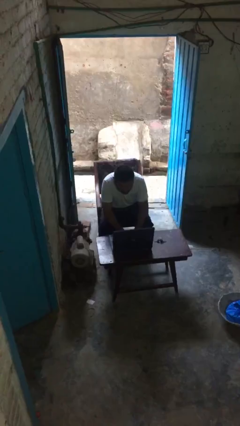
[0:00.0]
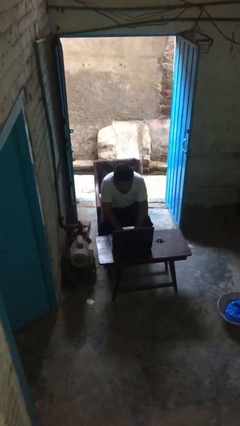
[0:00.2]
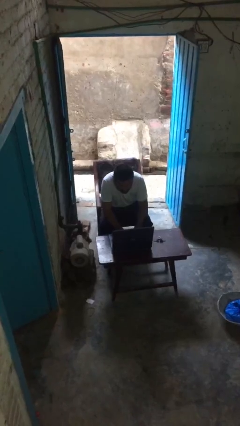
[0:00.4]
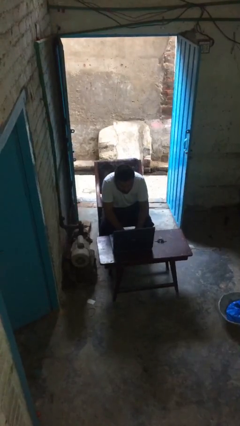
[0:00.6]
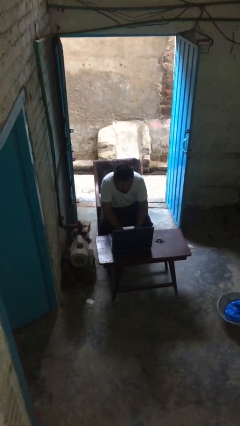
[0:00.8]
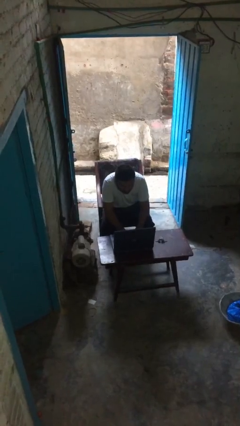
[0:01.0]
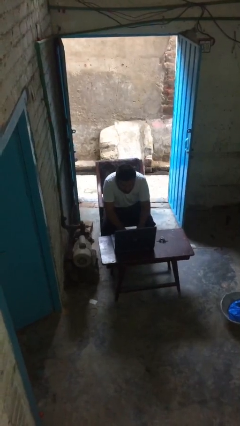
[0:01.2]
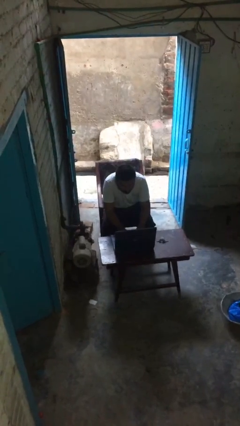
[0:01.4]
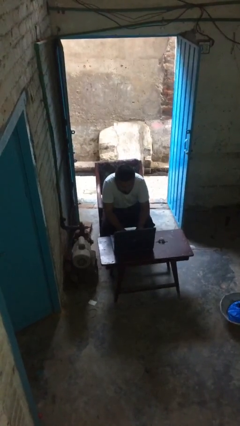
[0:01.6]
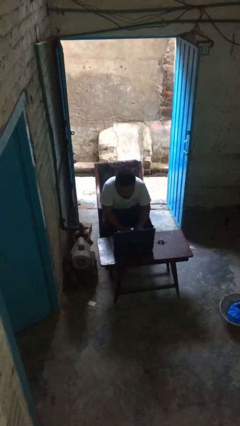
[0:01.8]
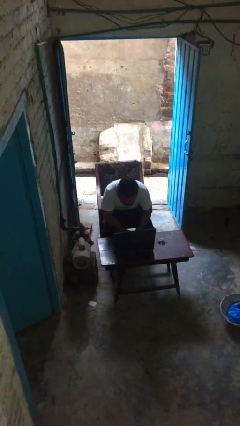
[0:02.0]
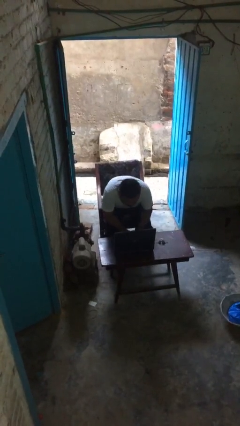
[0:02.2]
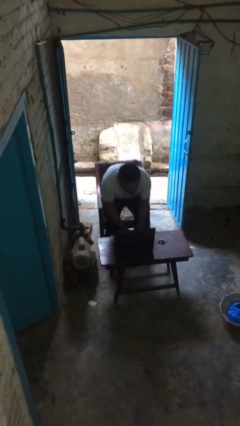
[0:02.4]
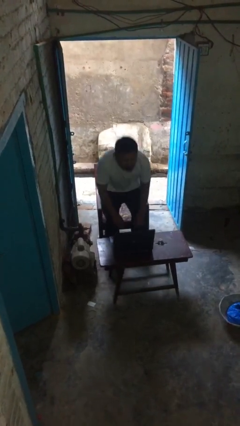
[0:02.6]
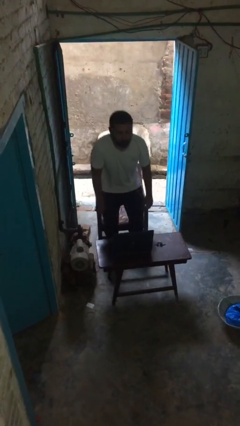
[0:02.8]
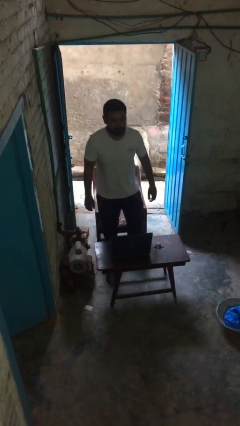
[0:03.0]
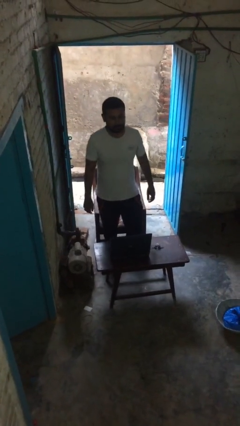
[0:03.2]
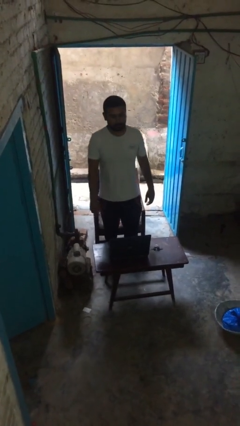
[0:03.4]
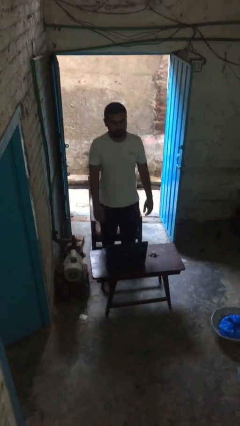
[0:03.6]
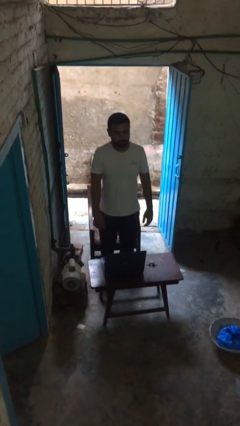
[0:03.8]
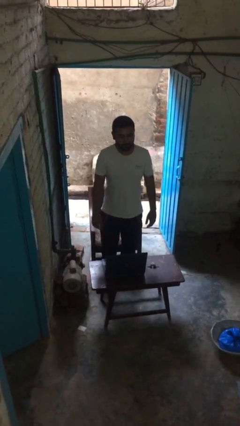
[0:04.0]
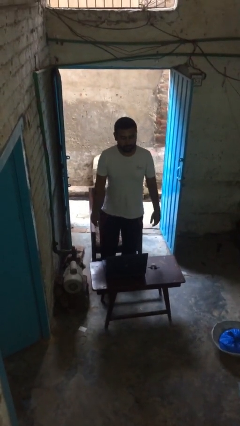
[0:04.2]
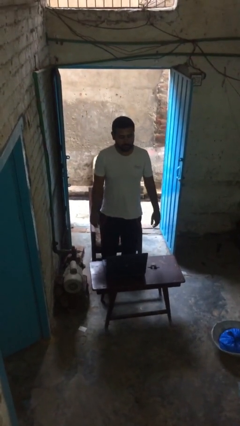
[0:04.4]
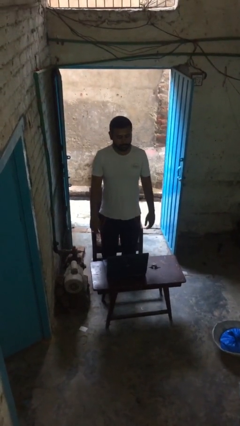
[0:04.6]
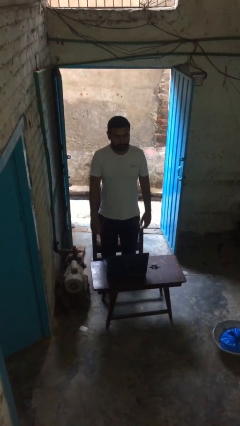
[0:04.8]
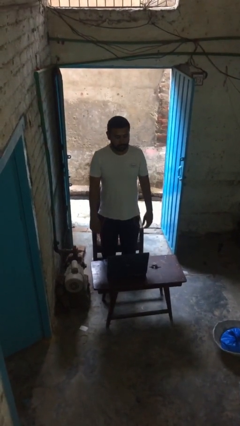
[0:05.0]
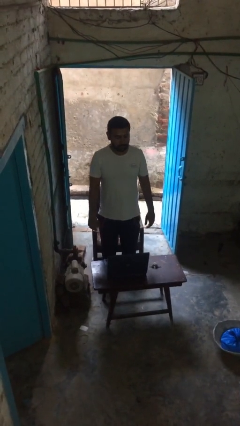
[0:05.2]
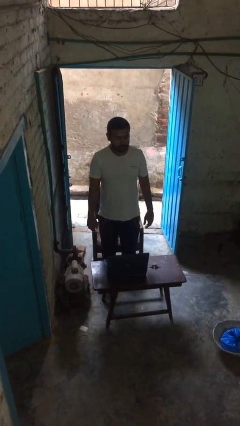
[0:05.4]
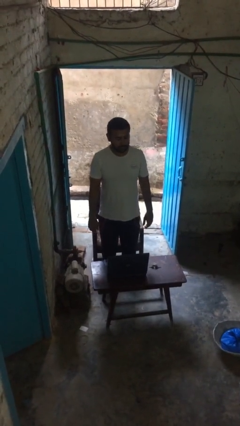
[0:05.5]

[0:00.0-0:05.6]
person stands up

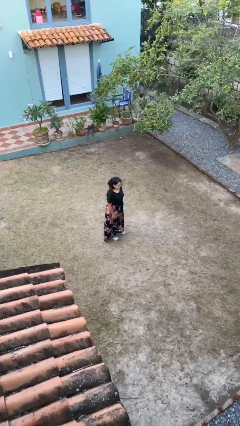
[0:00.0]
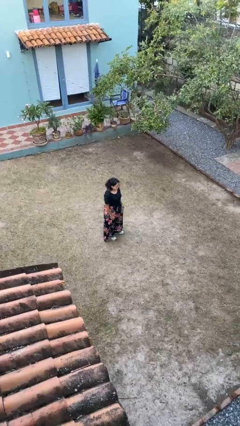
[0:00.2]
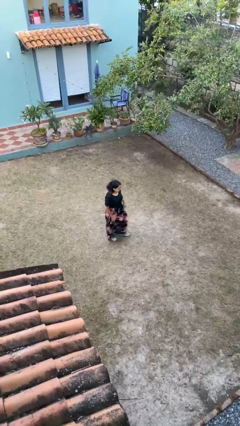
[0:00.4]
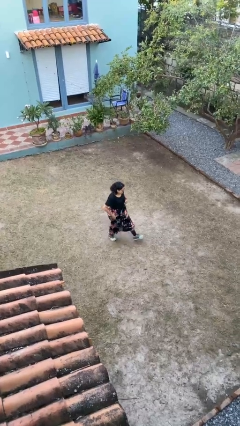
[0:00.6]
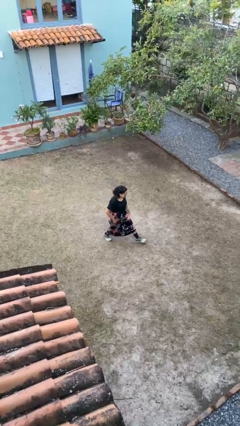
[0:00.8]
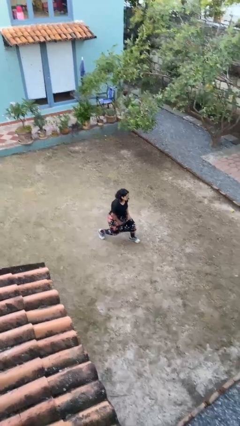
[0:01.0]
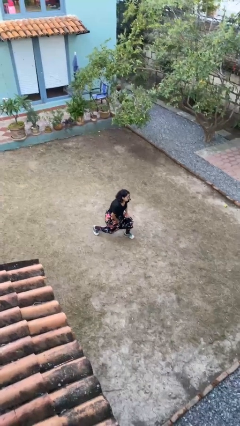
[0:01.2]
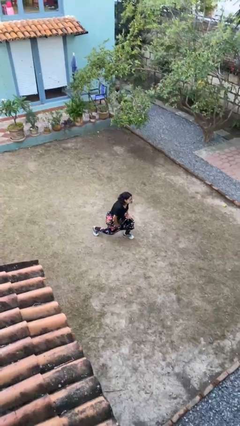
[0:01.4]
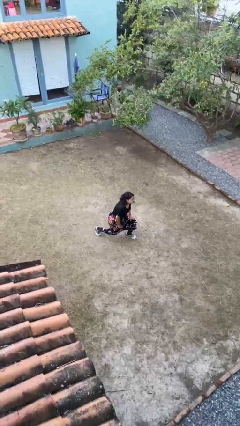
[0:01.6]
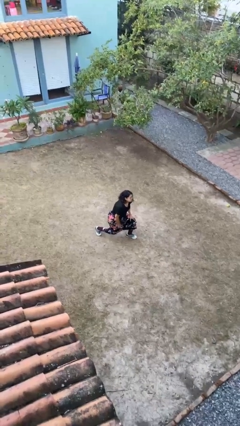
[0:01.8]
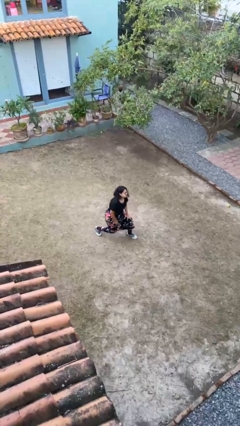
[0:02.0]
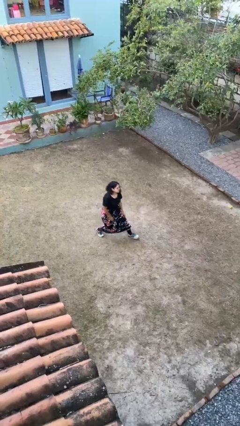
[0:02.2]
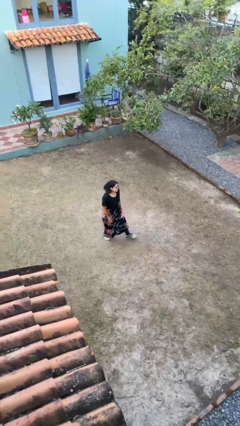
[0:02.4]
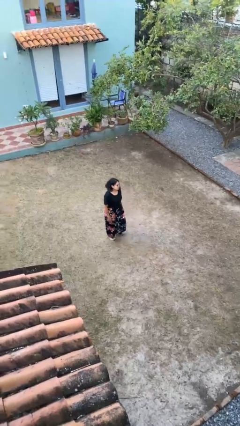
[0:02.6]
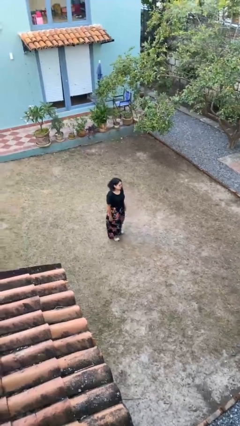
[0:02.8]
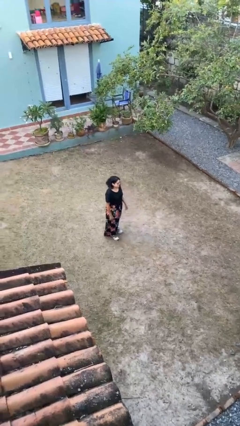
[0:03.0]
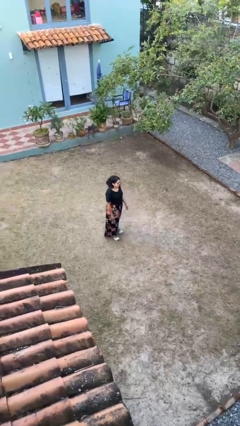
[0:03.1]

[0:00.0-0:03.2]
person exercises with lunges

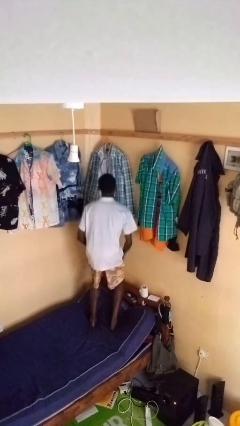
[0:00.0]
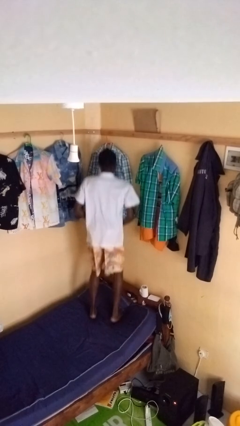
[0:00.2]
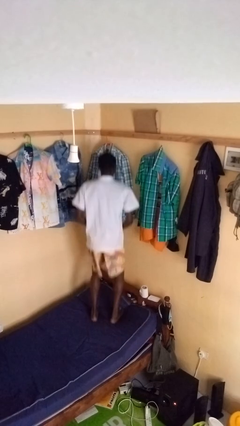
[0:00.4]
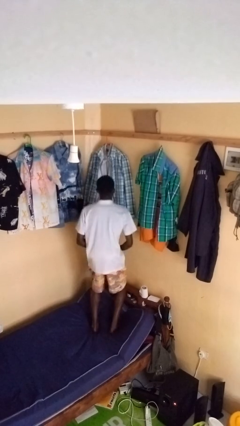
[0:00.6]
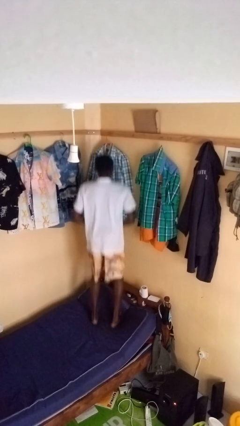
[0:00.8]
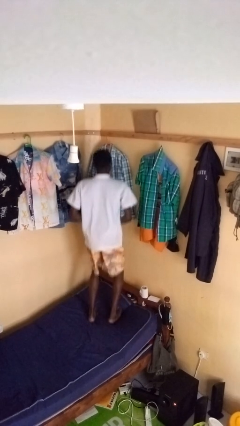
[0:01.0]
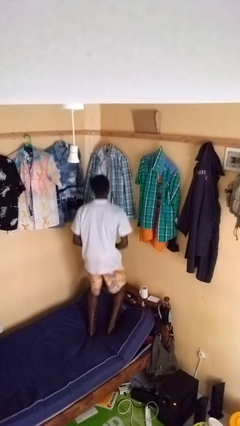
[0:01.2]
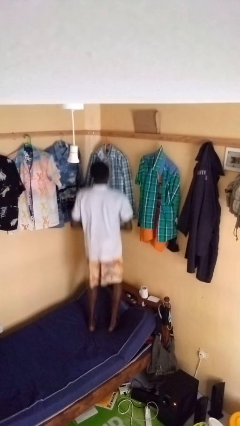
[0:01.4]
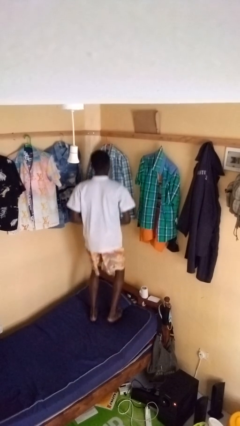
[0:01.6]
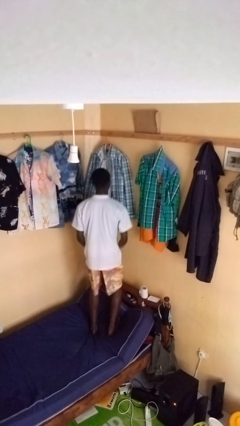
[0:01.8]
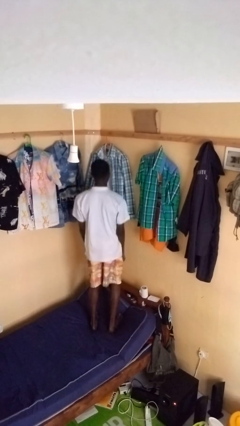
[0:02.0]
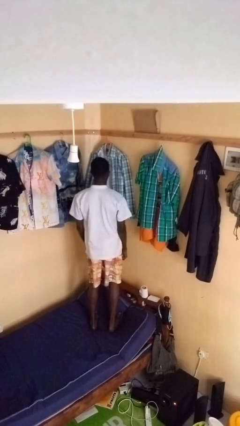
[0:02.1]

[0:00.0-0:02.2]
person jumps on bed

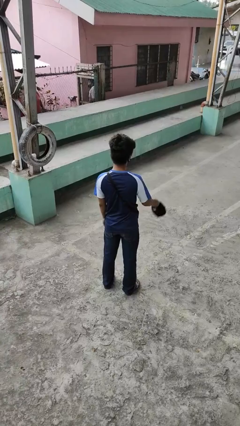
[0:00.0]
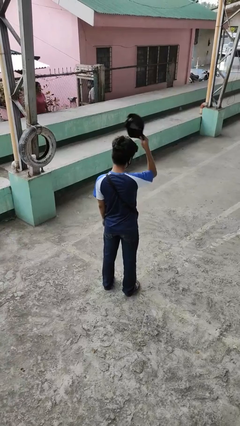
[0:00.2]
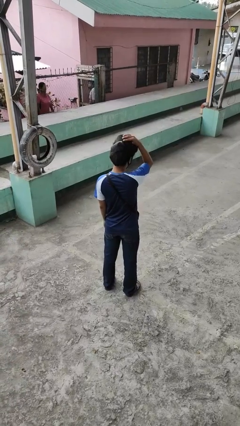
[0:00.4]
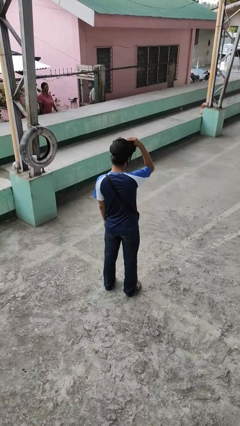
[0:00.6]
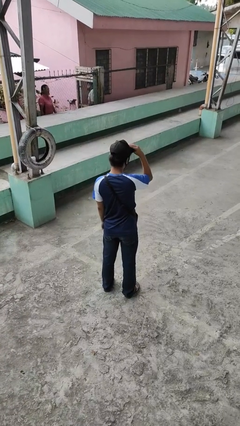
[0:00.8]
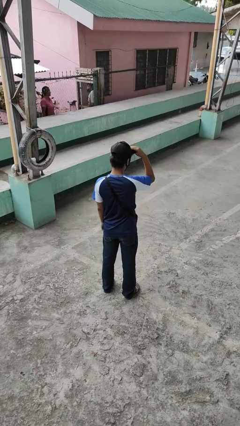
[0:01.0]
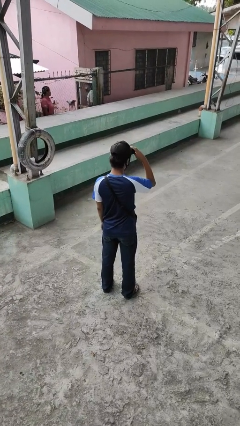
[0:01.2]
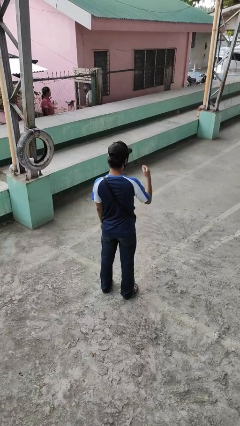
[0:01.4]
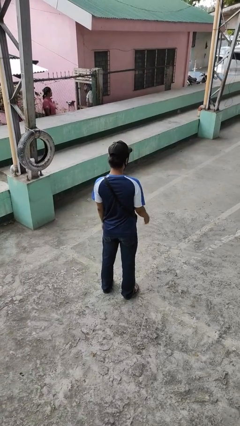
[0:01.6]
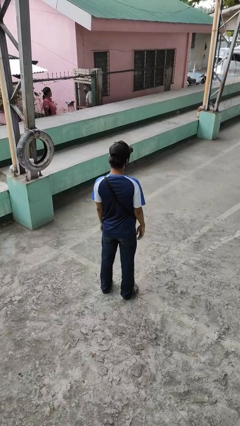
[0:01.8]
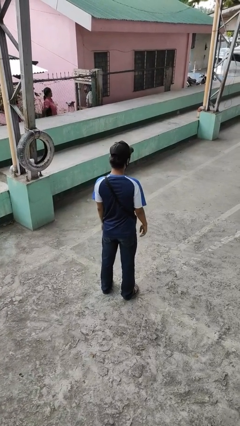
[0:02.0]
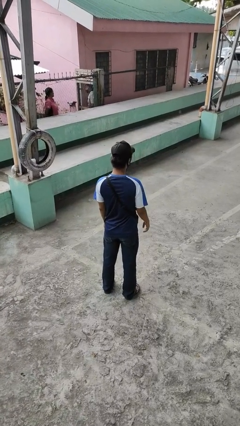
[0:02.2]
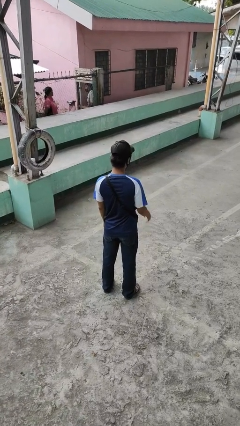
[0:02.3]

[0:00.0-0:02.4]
person puts on hat

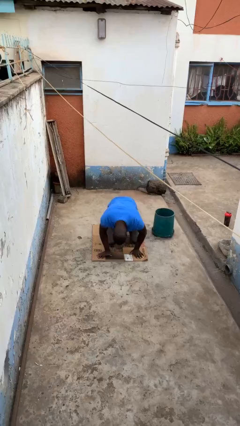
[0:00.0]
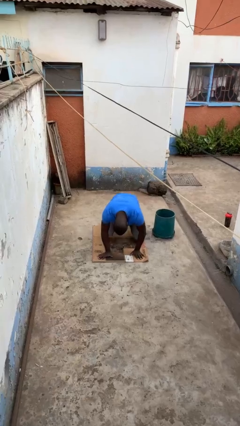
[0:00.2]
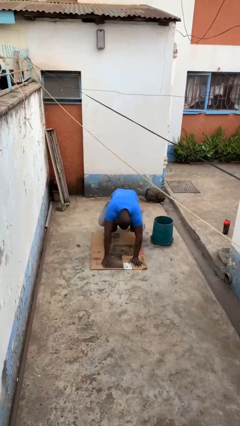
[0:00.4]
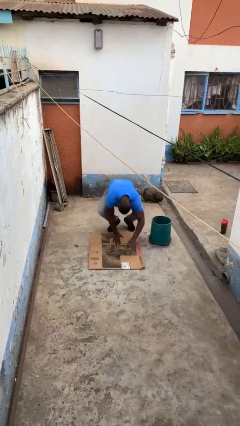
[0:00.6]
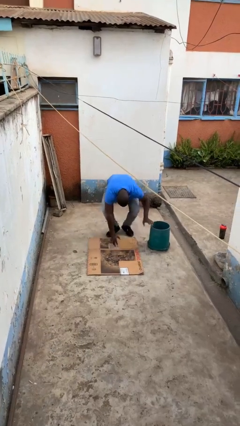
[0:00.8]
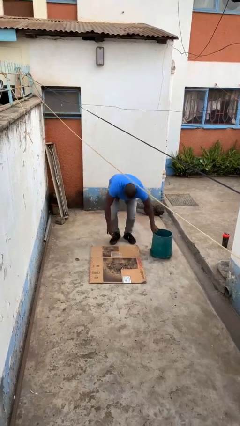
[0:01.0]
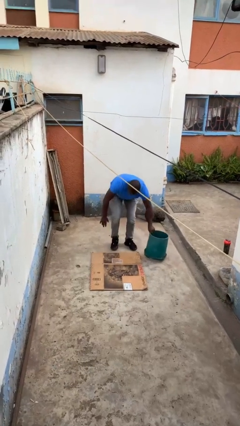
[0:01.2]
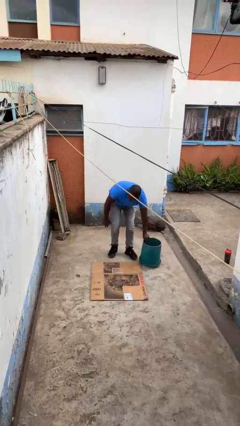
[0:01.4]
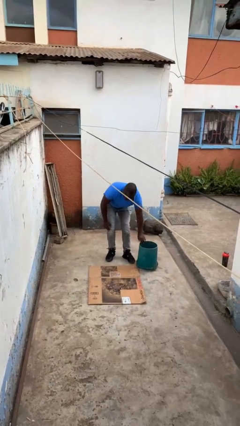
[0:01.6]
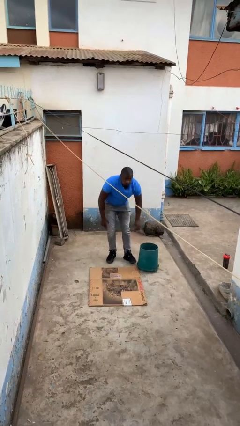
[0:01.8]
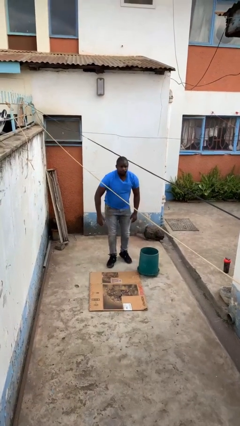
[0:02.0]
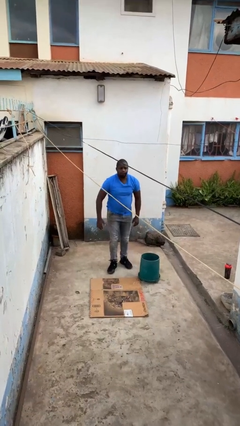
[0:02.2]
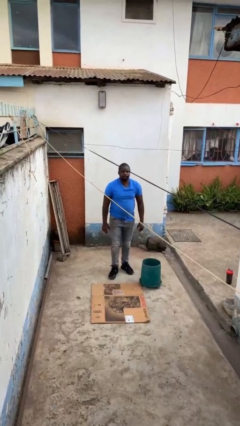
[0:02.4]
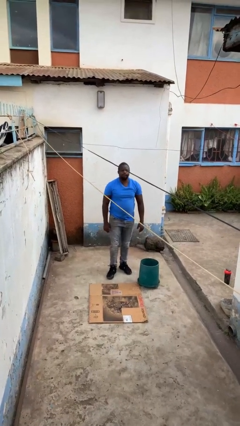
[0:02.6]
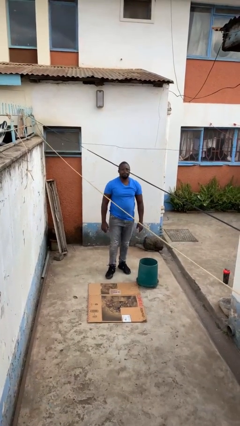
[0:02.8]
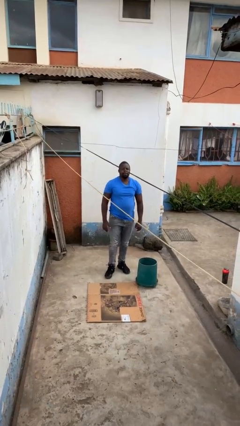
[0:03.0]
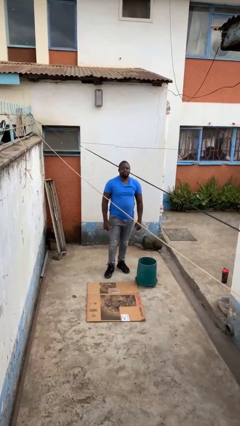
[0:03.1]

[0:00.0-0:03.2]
person stands up from floor

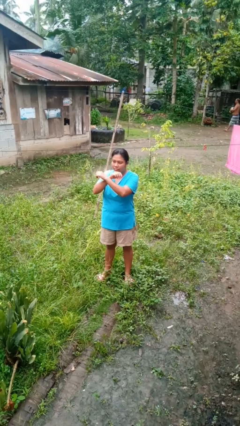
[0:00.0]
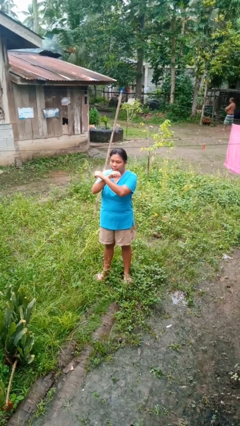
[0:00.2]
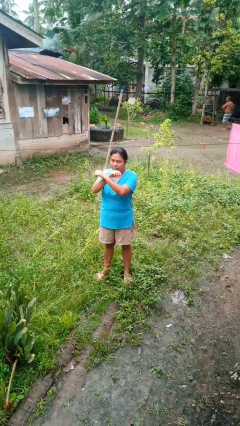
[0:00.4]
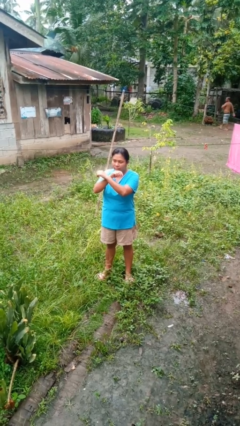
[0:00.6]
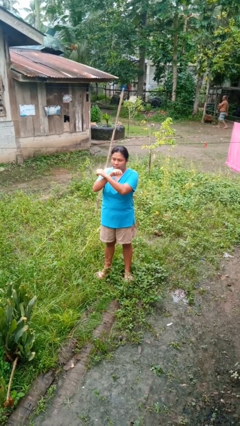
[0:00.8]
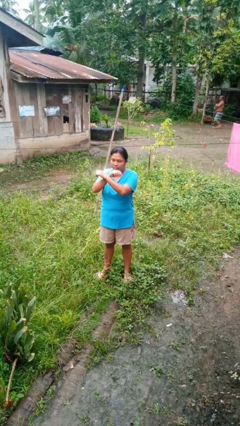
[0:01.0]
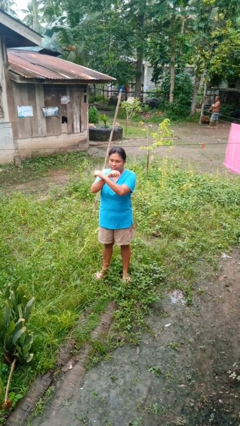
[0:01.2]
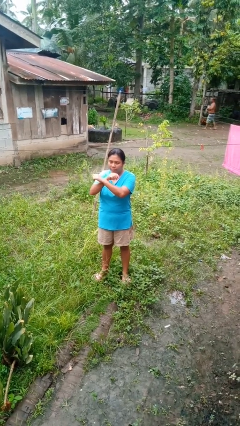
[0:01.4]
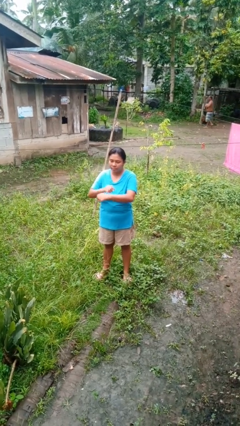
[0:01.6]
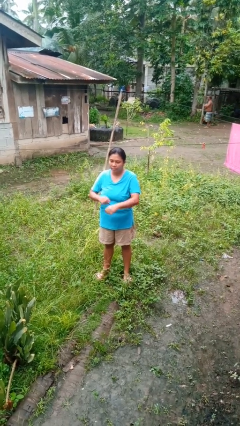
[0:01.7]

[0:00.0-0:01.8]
person gestures arms x
